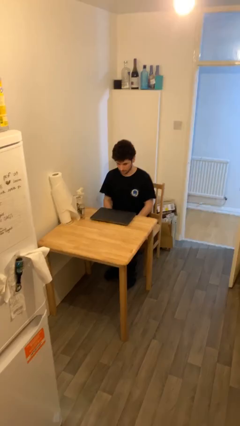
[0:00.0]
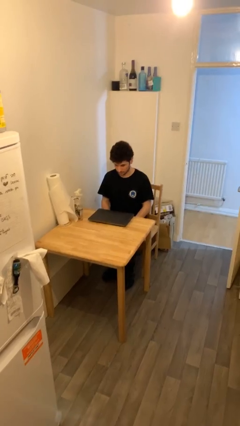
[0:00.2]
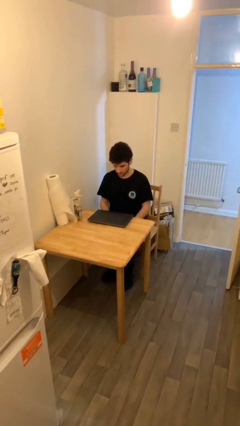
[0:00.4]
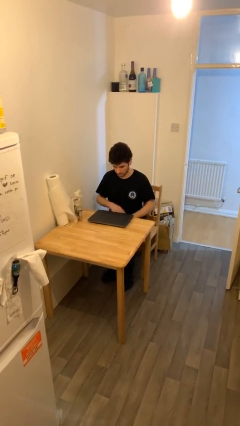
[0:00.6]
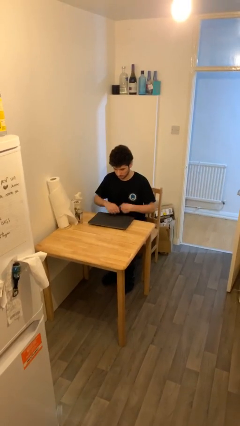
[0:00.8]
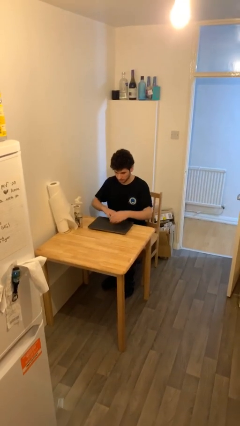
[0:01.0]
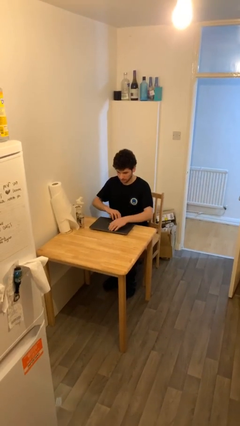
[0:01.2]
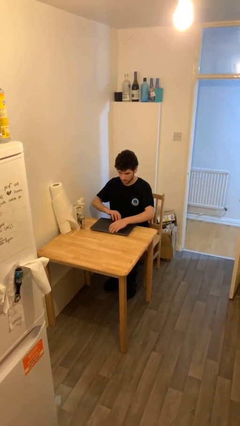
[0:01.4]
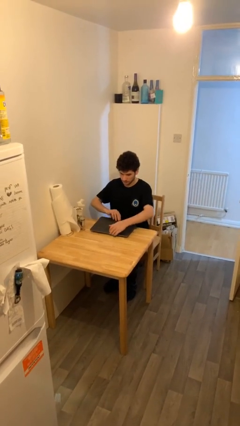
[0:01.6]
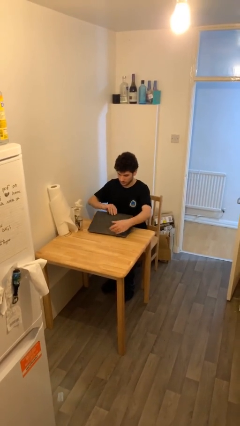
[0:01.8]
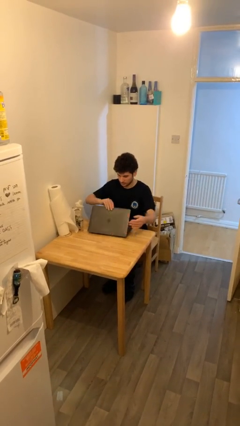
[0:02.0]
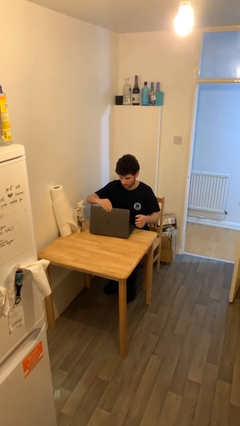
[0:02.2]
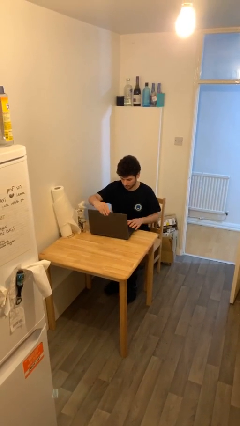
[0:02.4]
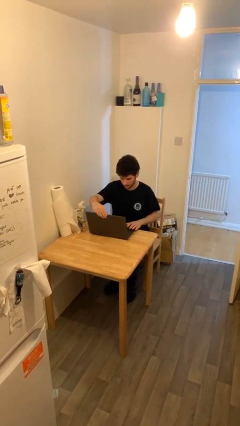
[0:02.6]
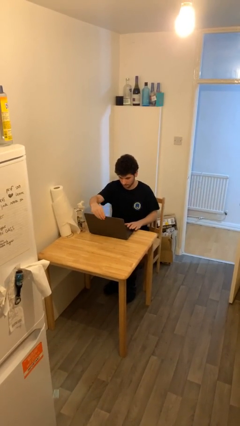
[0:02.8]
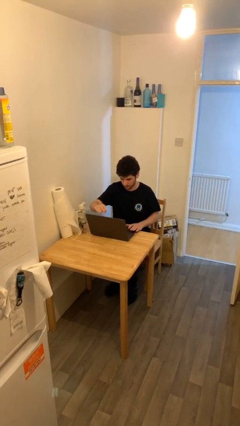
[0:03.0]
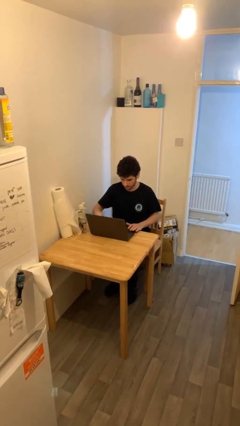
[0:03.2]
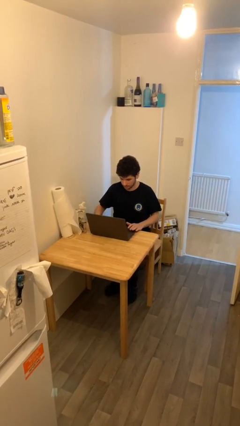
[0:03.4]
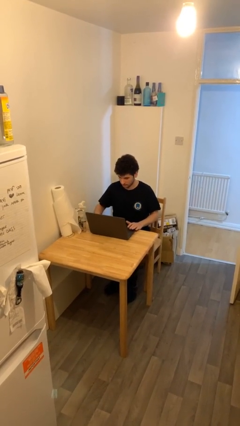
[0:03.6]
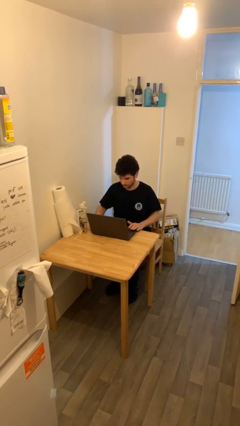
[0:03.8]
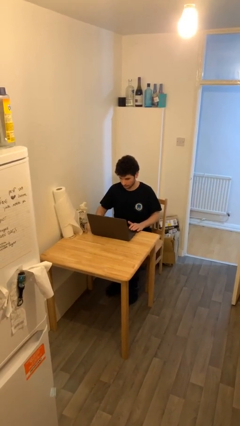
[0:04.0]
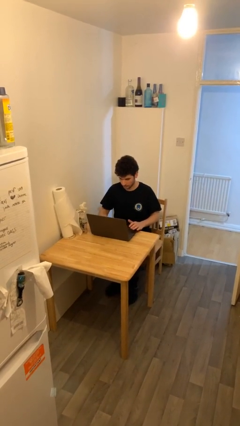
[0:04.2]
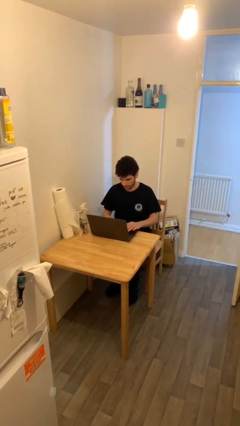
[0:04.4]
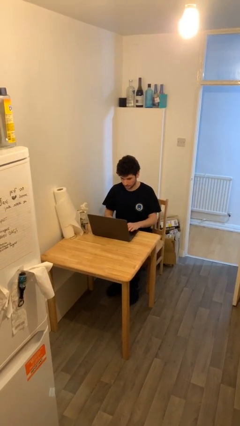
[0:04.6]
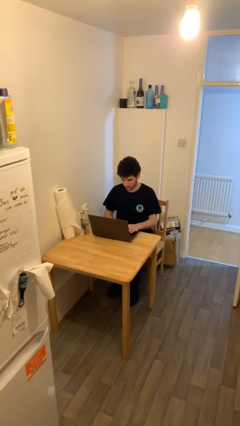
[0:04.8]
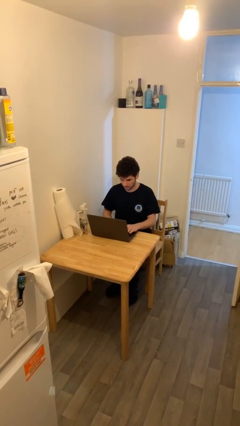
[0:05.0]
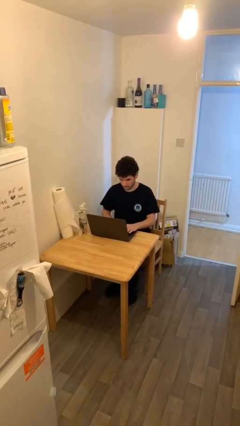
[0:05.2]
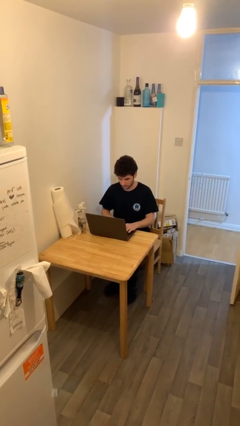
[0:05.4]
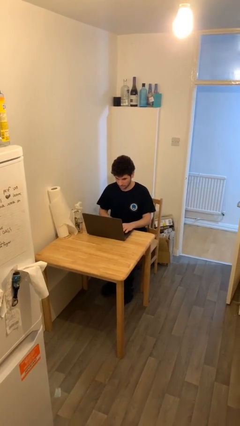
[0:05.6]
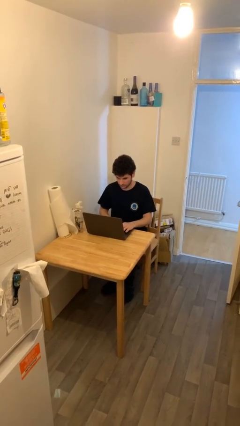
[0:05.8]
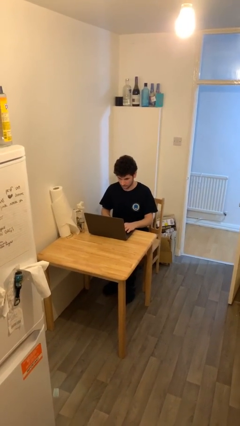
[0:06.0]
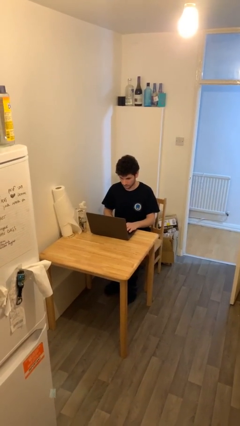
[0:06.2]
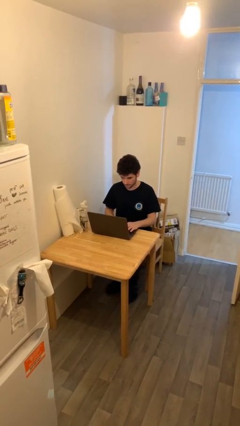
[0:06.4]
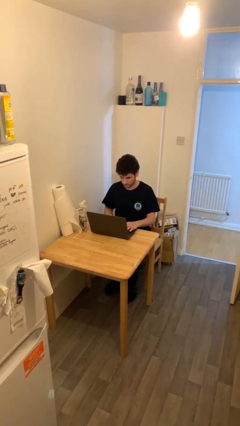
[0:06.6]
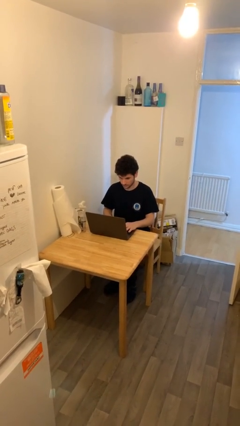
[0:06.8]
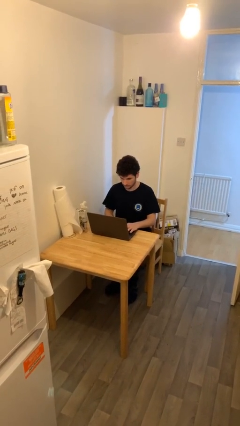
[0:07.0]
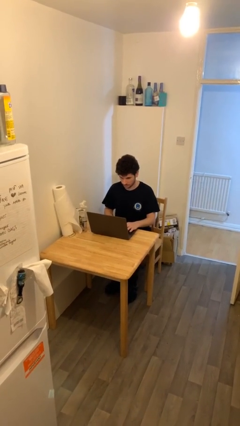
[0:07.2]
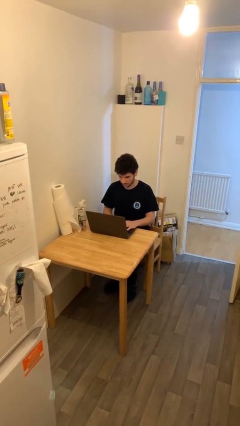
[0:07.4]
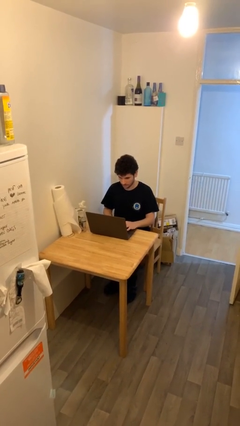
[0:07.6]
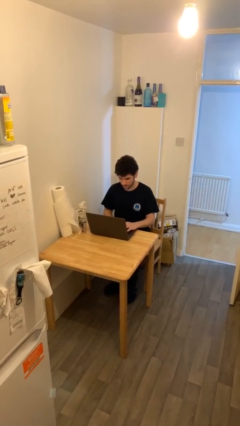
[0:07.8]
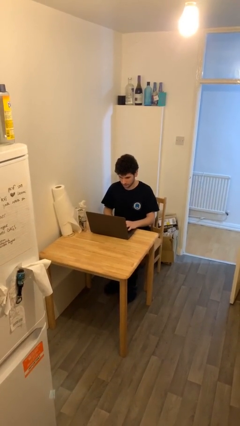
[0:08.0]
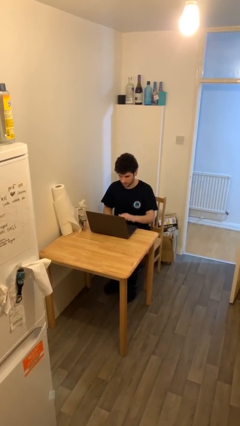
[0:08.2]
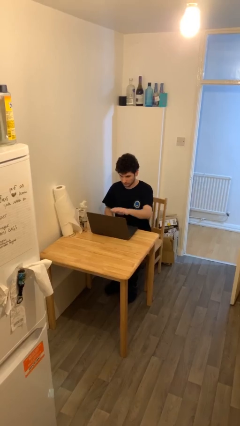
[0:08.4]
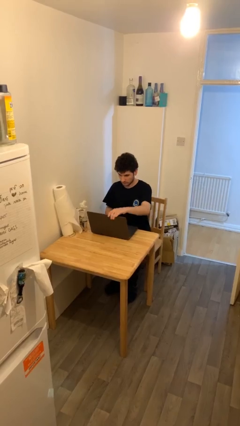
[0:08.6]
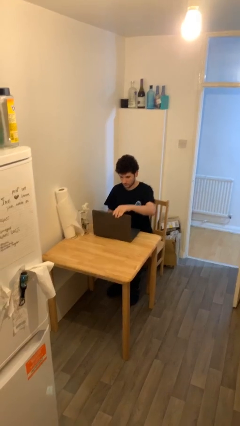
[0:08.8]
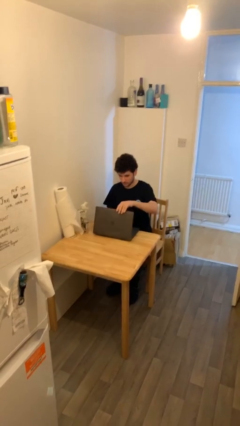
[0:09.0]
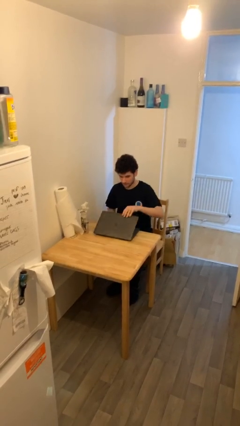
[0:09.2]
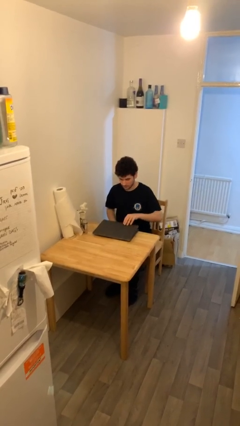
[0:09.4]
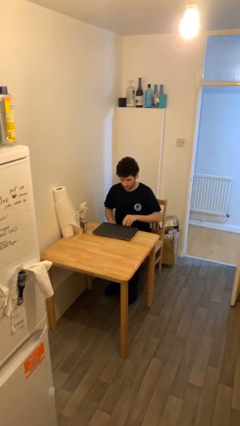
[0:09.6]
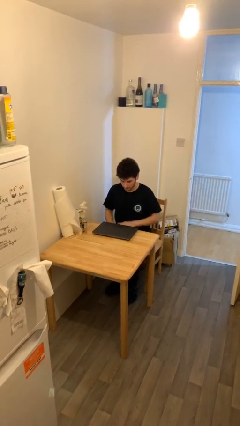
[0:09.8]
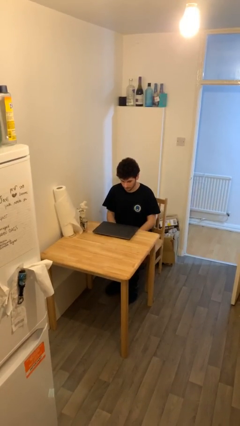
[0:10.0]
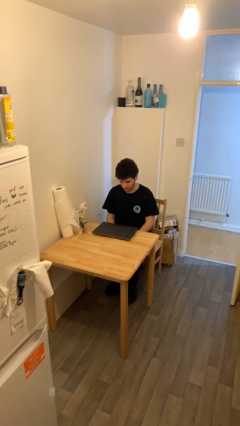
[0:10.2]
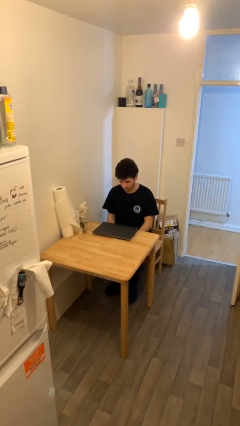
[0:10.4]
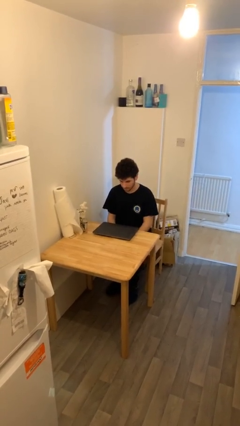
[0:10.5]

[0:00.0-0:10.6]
person interacts with laptop

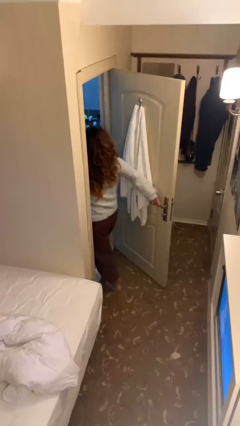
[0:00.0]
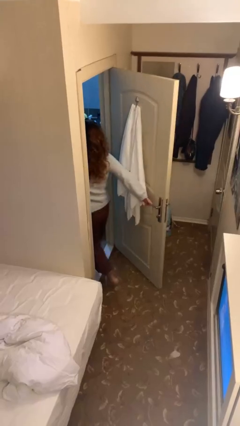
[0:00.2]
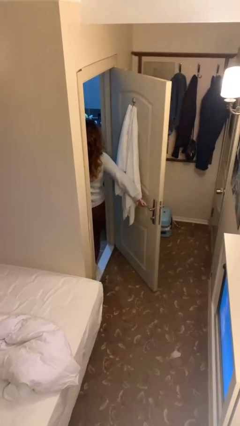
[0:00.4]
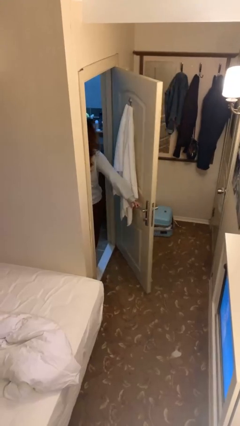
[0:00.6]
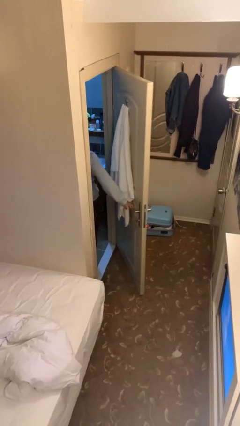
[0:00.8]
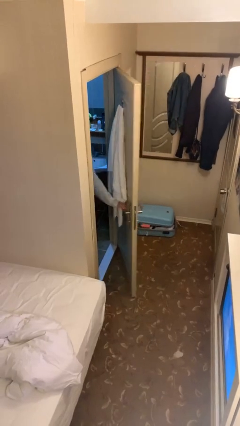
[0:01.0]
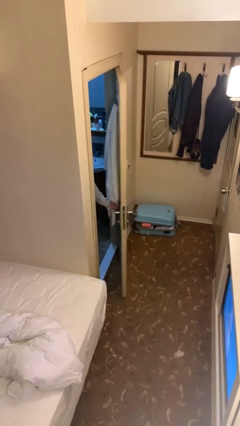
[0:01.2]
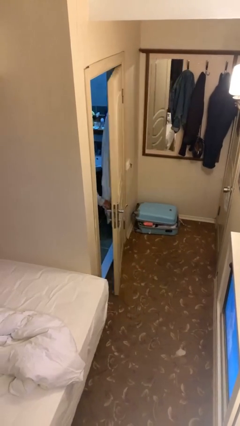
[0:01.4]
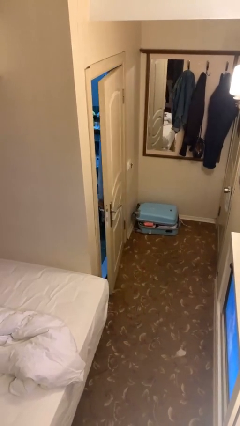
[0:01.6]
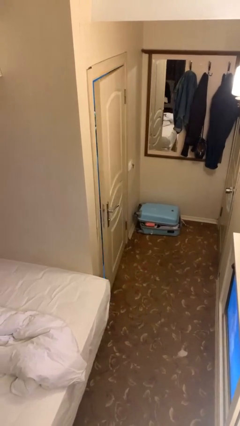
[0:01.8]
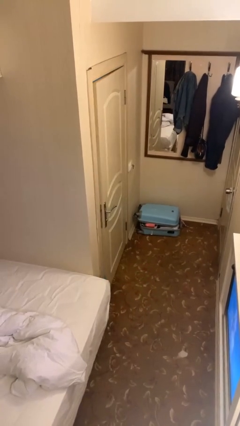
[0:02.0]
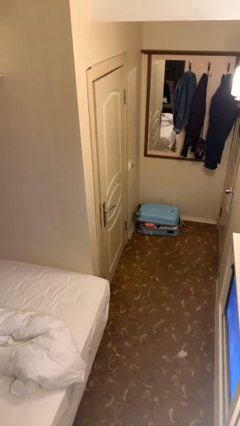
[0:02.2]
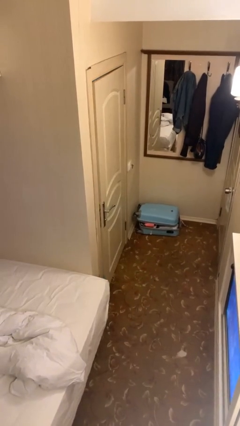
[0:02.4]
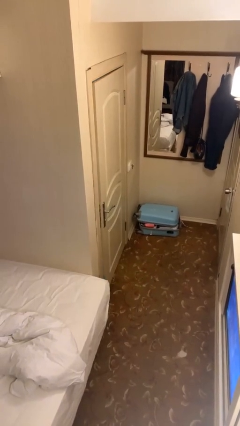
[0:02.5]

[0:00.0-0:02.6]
person closes facility door

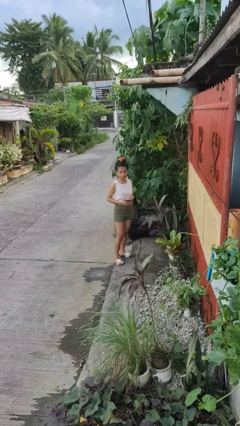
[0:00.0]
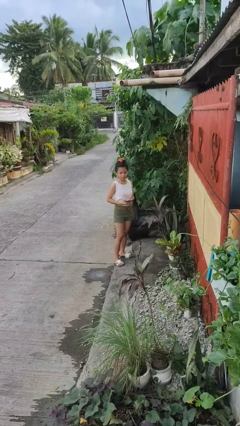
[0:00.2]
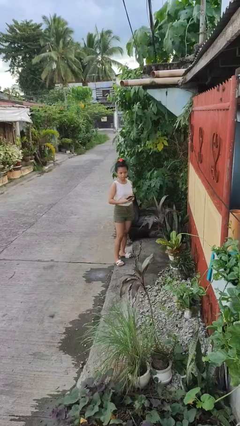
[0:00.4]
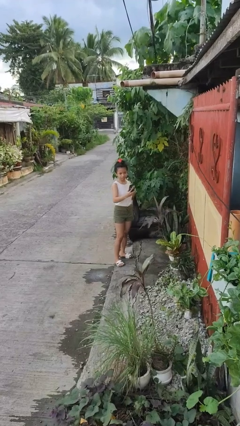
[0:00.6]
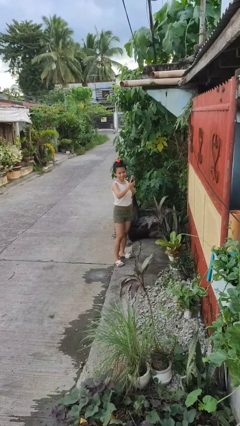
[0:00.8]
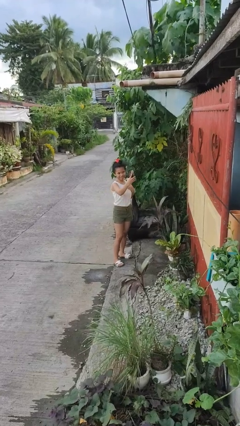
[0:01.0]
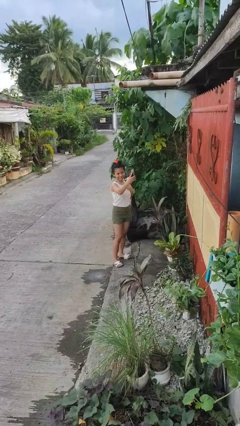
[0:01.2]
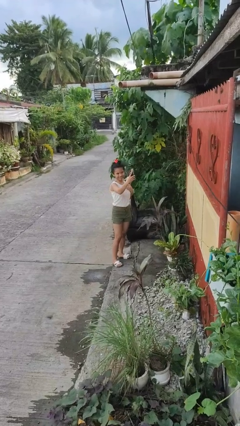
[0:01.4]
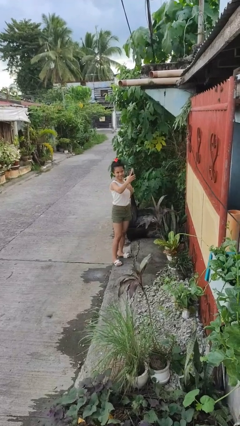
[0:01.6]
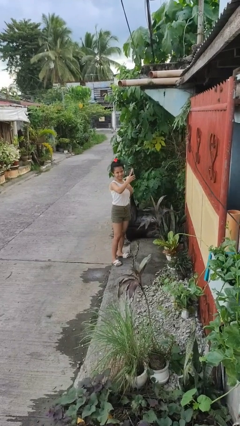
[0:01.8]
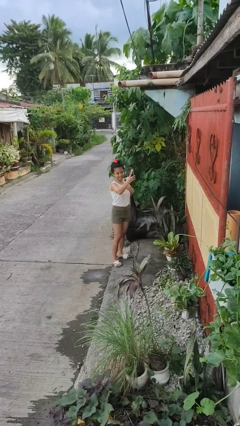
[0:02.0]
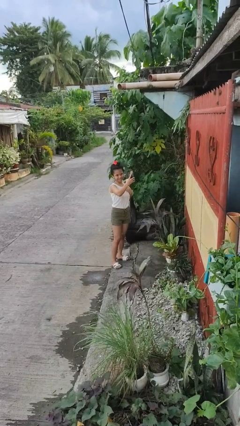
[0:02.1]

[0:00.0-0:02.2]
person takes selfie

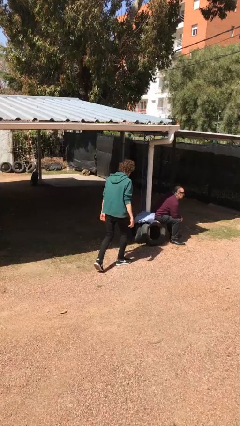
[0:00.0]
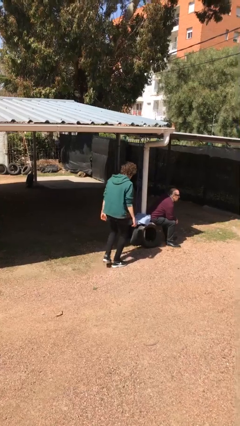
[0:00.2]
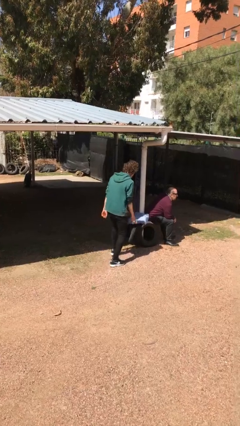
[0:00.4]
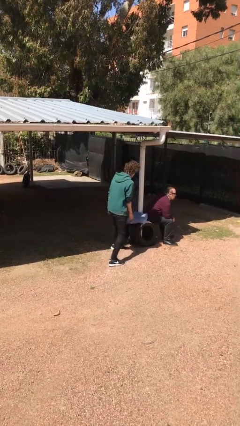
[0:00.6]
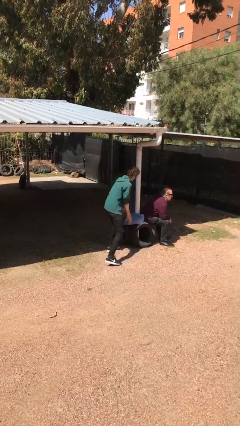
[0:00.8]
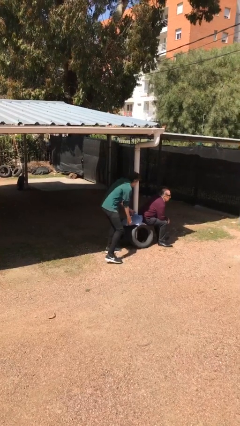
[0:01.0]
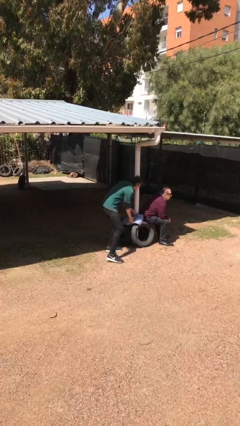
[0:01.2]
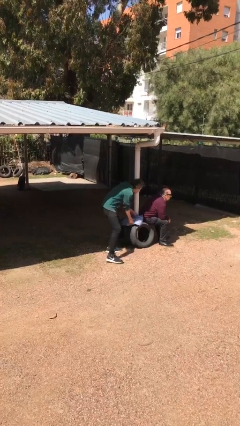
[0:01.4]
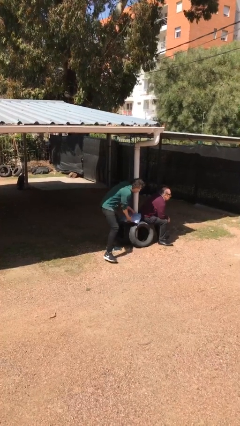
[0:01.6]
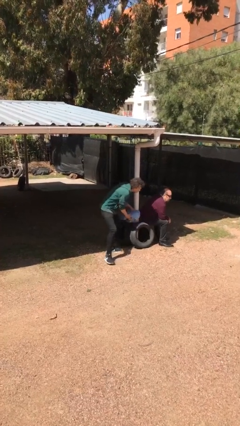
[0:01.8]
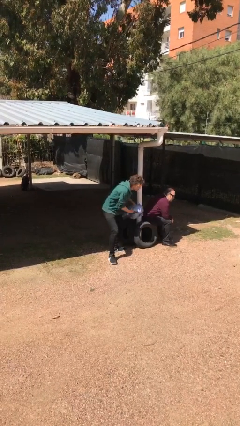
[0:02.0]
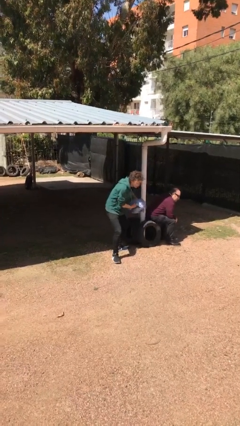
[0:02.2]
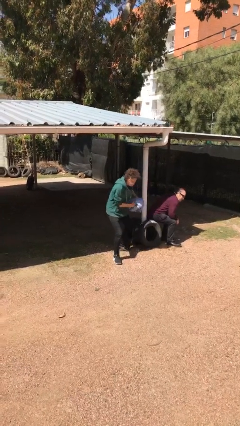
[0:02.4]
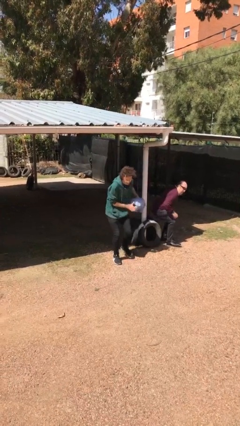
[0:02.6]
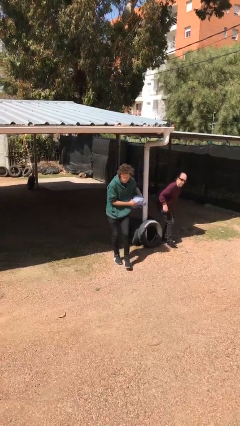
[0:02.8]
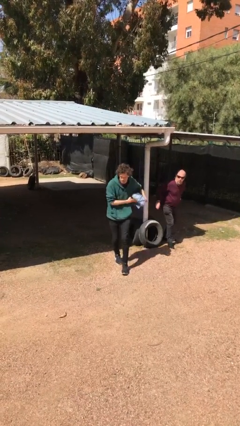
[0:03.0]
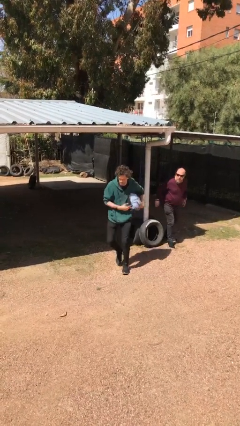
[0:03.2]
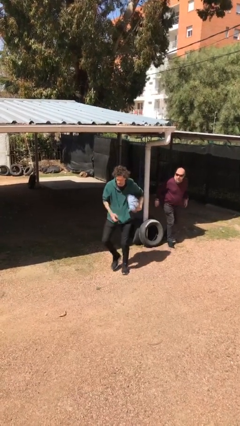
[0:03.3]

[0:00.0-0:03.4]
person steals object from person
